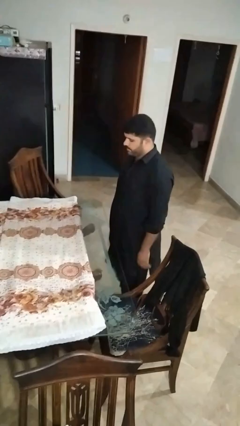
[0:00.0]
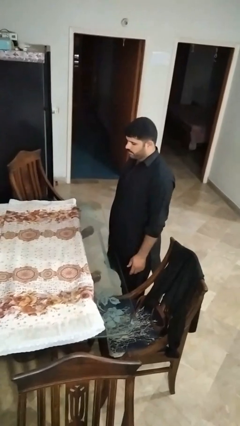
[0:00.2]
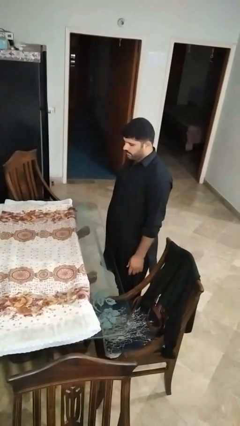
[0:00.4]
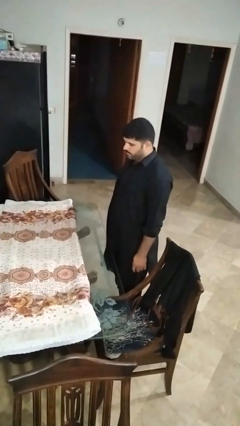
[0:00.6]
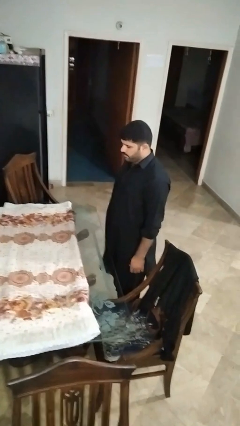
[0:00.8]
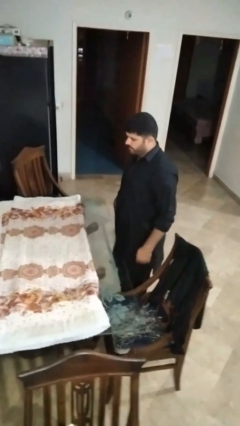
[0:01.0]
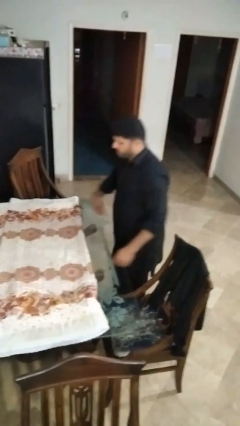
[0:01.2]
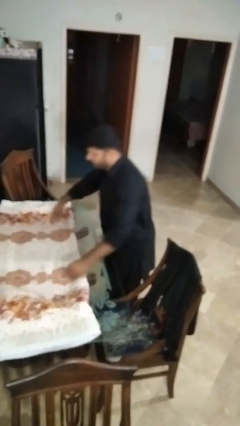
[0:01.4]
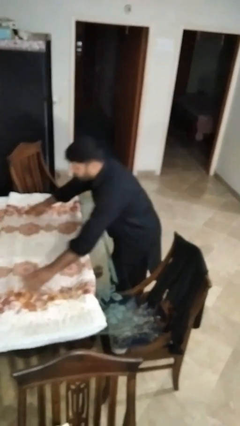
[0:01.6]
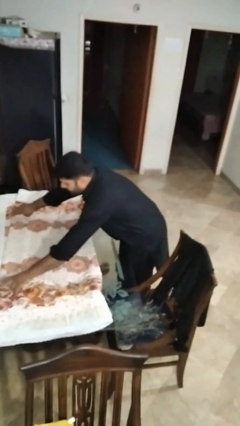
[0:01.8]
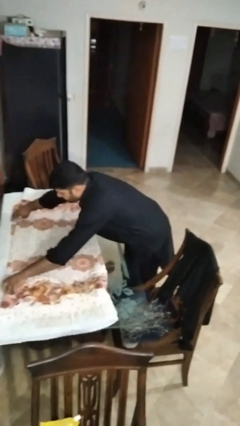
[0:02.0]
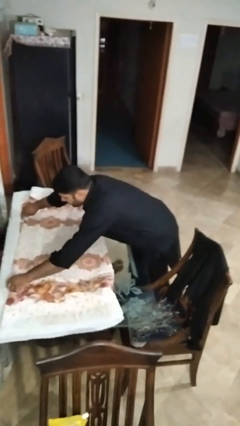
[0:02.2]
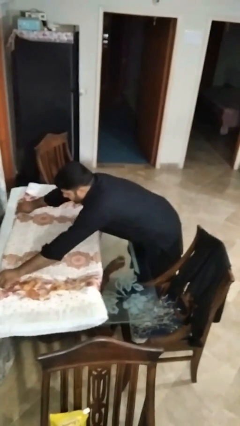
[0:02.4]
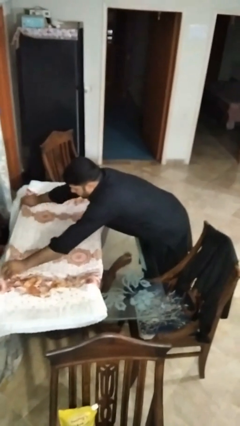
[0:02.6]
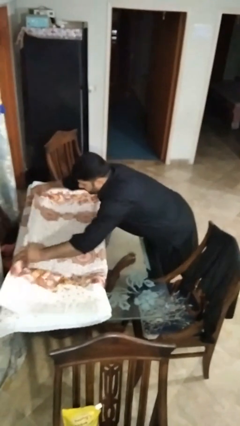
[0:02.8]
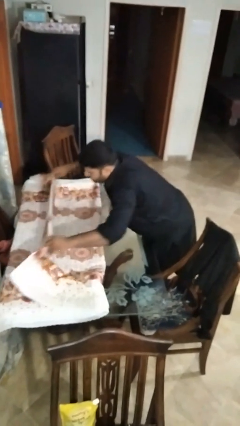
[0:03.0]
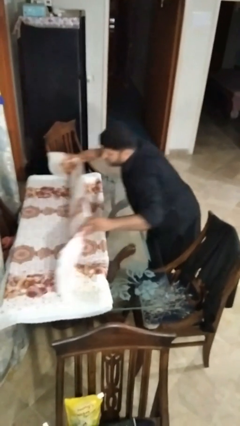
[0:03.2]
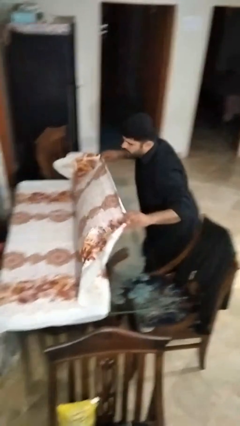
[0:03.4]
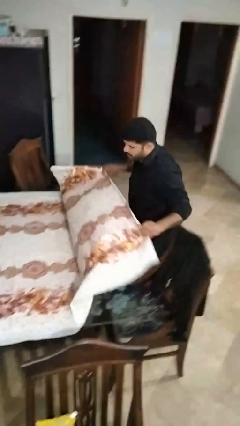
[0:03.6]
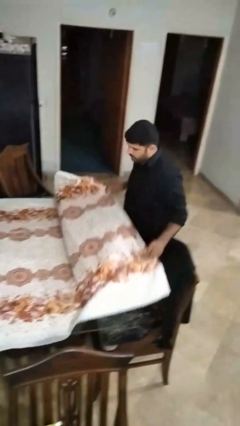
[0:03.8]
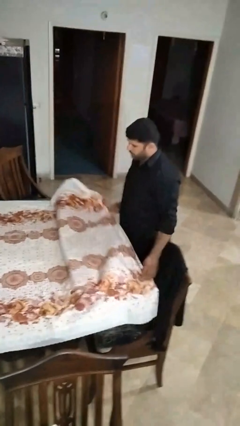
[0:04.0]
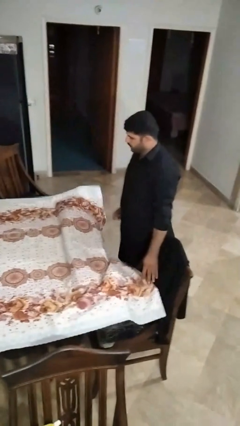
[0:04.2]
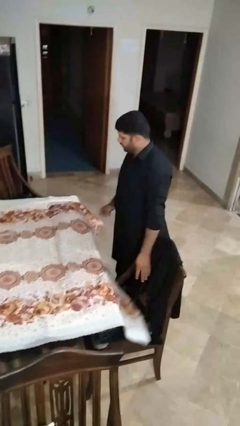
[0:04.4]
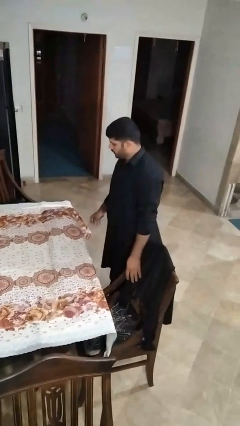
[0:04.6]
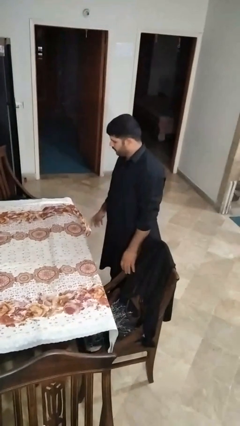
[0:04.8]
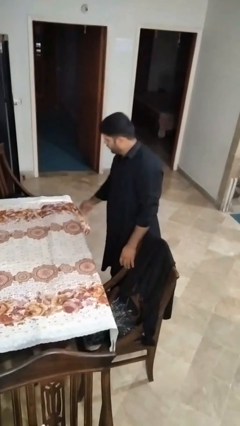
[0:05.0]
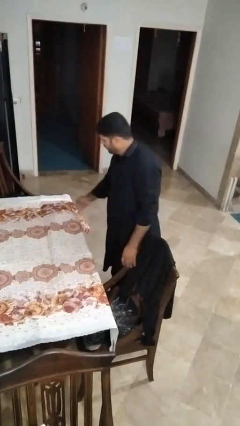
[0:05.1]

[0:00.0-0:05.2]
person spreads tablecloth

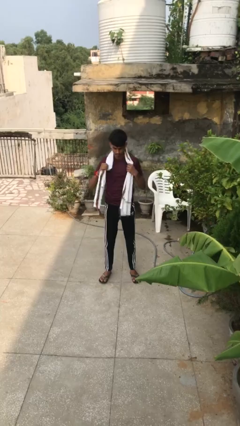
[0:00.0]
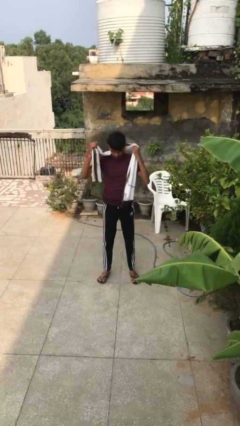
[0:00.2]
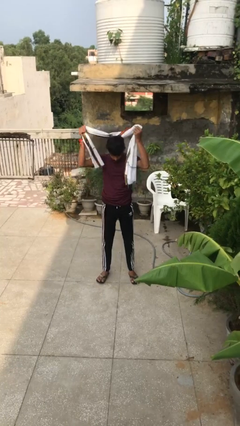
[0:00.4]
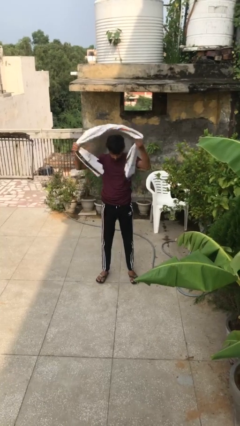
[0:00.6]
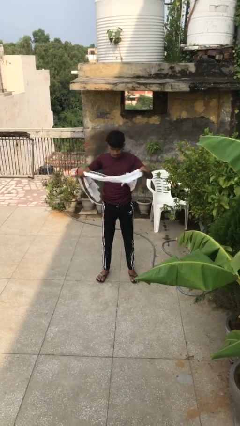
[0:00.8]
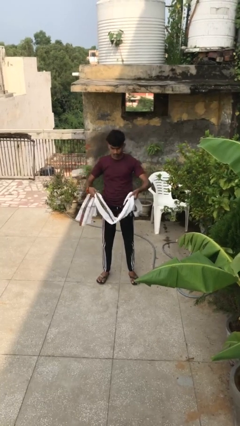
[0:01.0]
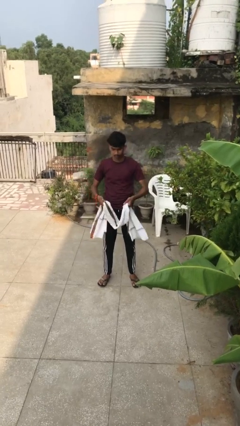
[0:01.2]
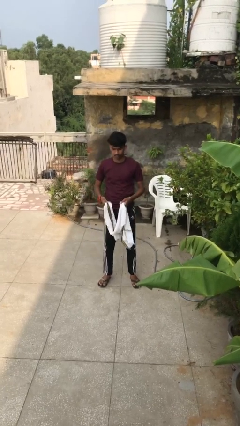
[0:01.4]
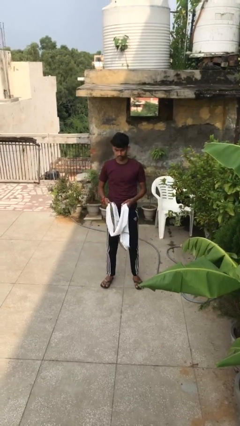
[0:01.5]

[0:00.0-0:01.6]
person takes off shoes

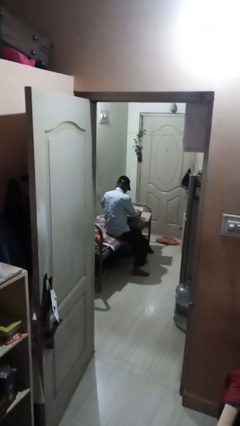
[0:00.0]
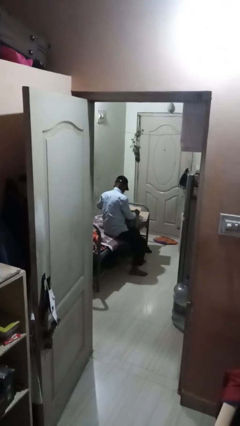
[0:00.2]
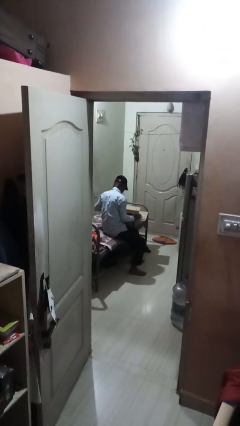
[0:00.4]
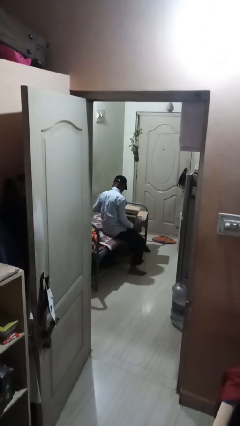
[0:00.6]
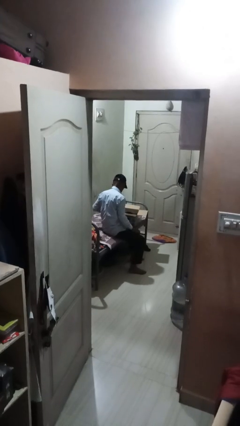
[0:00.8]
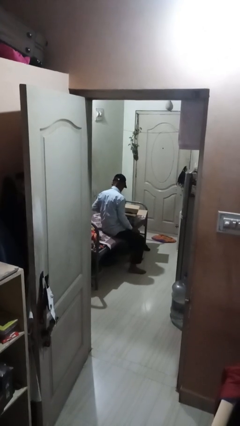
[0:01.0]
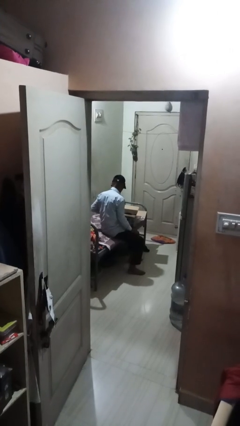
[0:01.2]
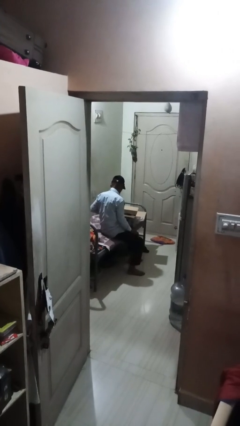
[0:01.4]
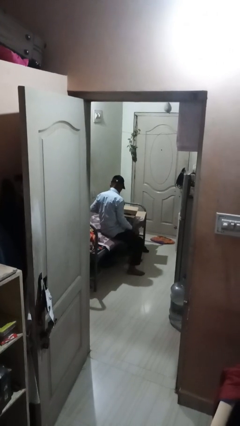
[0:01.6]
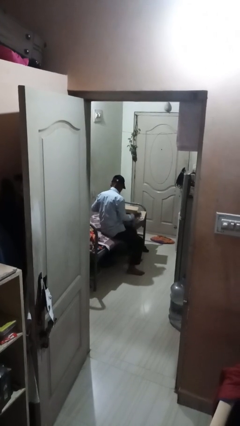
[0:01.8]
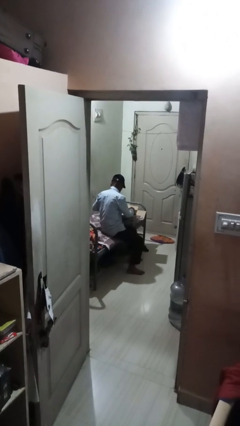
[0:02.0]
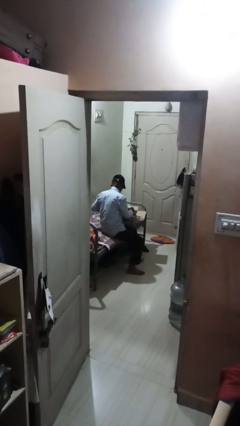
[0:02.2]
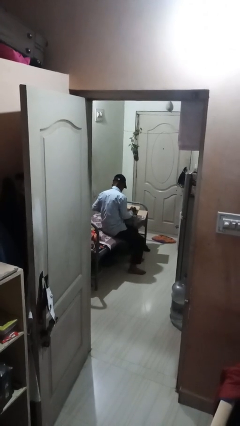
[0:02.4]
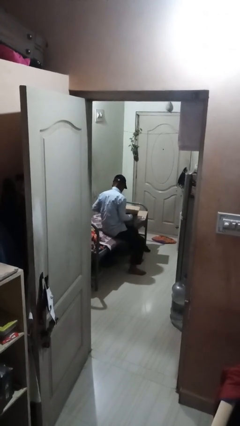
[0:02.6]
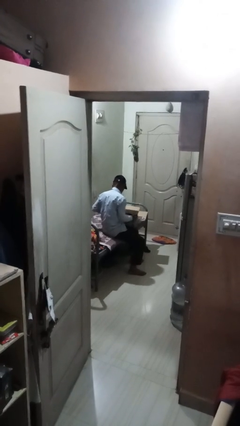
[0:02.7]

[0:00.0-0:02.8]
person searches in box

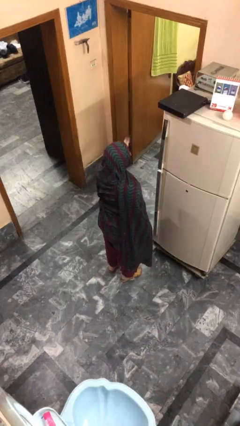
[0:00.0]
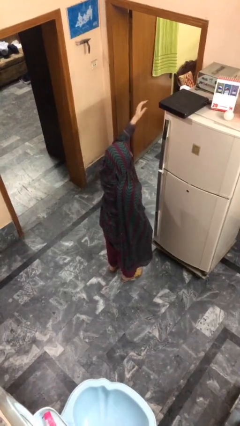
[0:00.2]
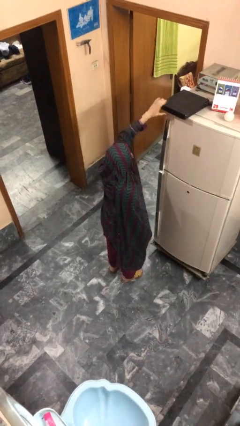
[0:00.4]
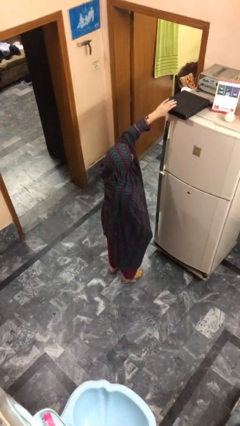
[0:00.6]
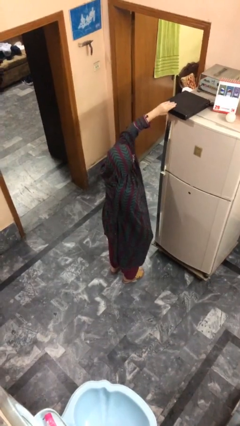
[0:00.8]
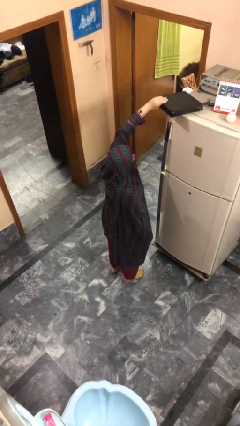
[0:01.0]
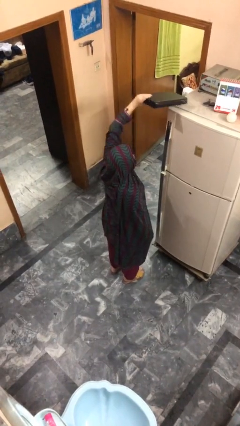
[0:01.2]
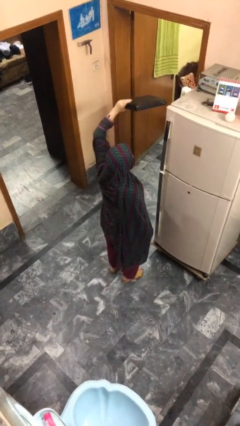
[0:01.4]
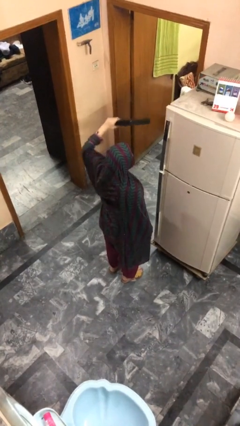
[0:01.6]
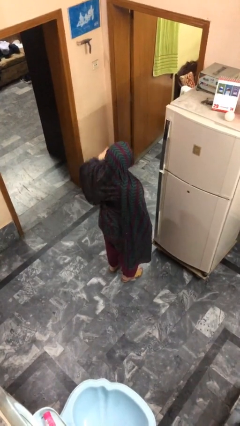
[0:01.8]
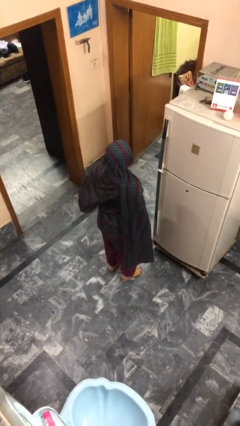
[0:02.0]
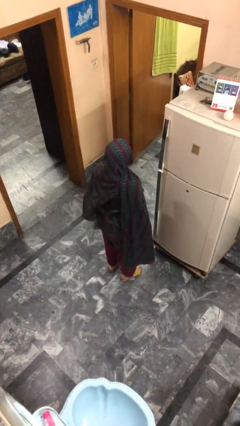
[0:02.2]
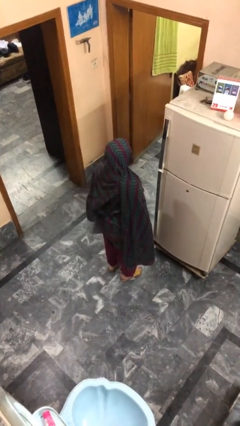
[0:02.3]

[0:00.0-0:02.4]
person picks up object from shelf

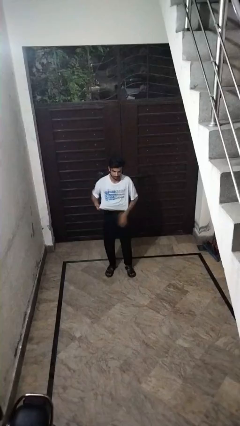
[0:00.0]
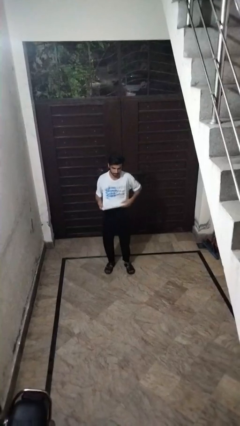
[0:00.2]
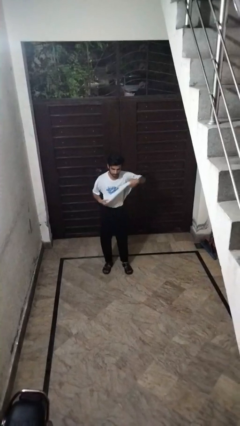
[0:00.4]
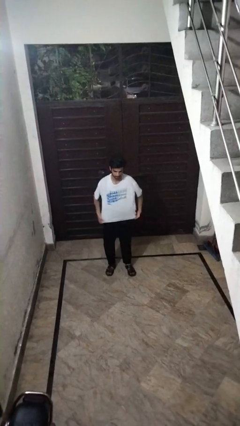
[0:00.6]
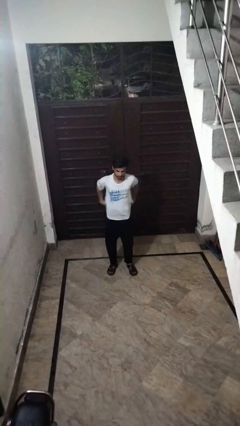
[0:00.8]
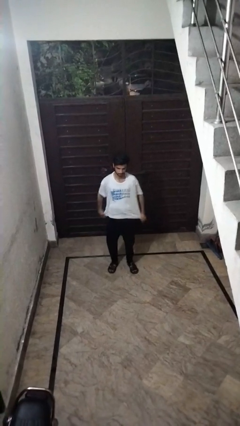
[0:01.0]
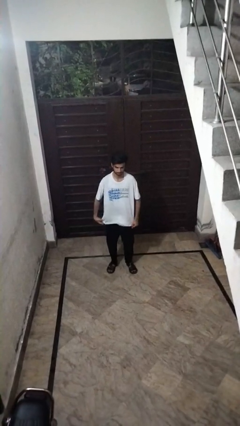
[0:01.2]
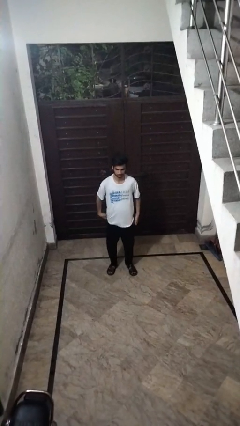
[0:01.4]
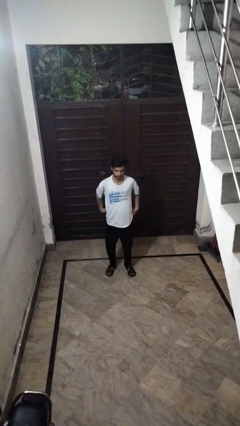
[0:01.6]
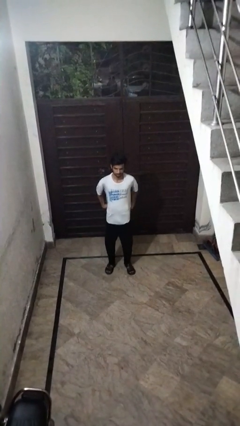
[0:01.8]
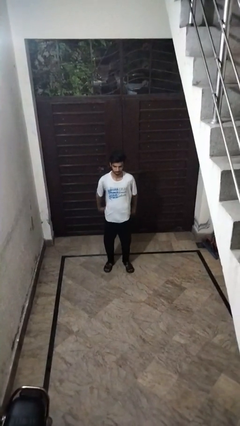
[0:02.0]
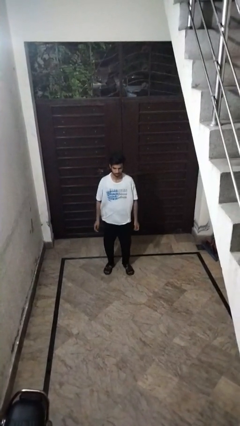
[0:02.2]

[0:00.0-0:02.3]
person opens facility door

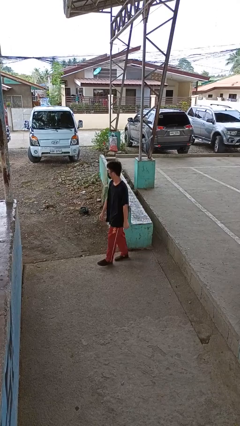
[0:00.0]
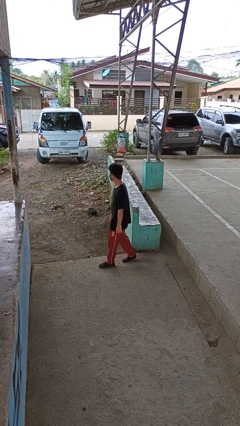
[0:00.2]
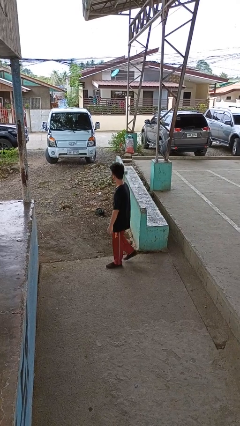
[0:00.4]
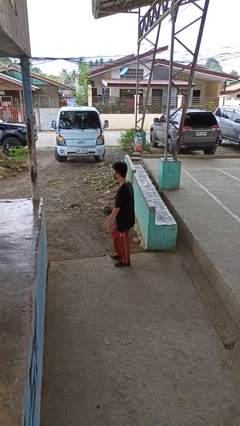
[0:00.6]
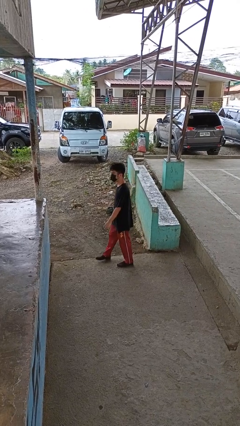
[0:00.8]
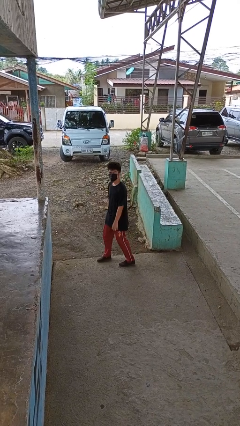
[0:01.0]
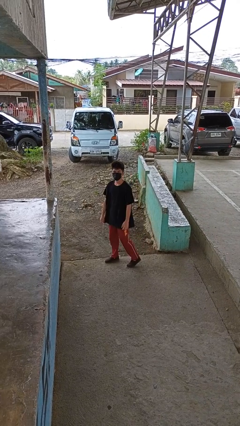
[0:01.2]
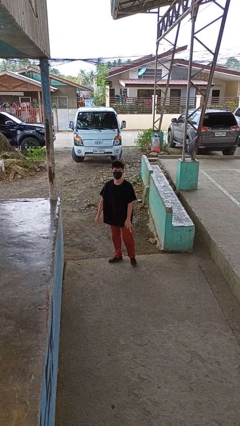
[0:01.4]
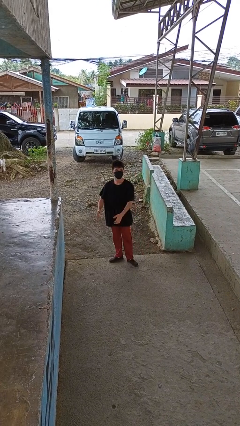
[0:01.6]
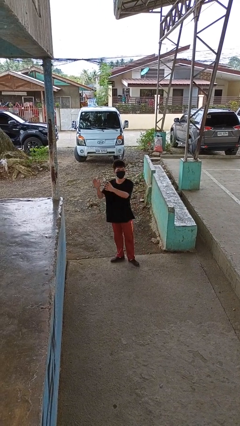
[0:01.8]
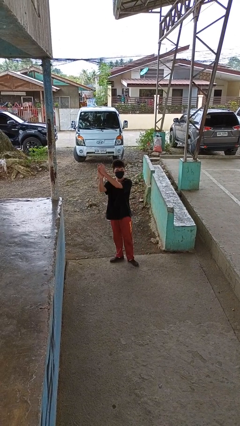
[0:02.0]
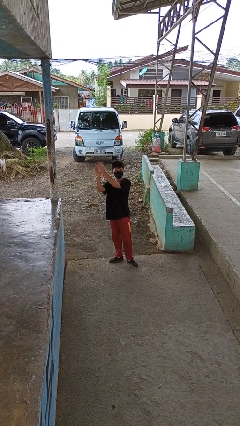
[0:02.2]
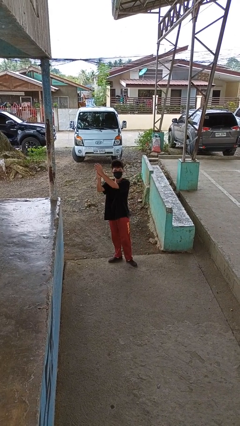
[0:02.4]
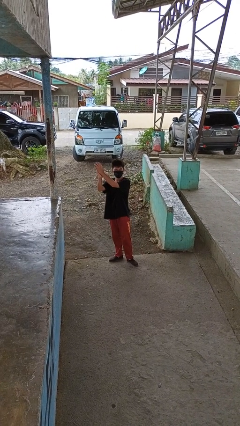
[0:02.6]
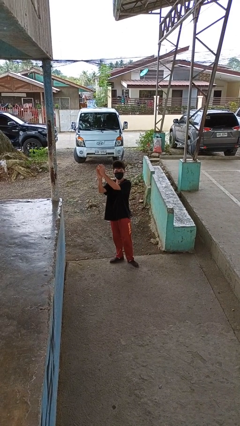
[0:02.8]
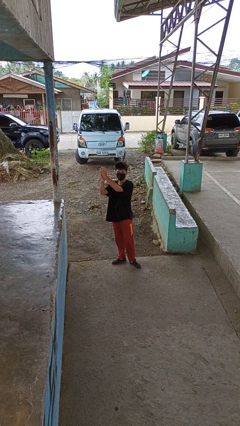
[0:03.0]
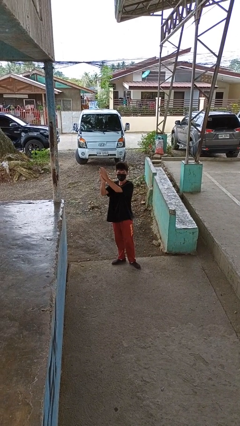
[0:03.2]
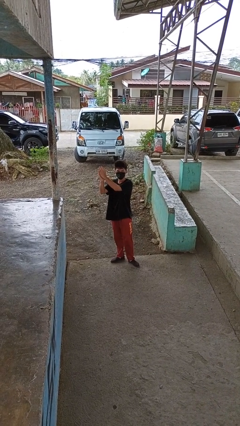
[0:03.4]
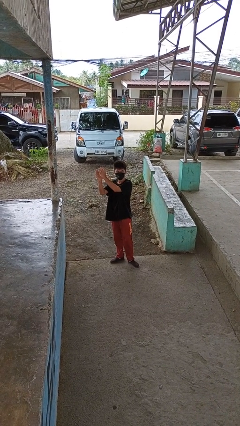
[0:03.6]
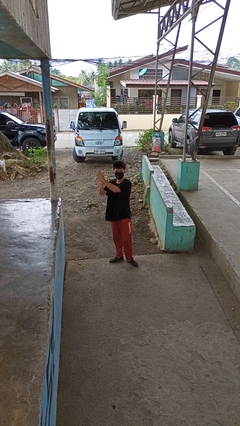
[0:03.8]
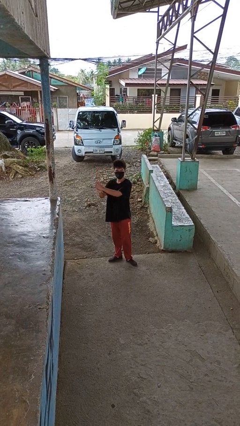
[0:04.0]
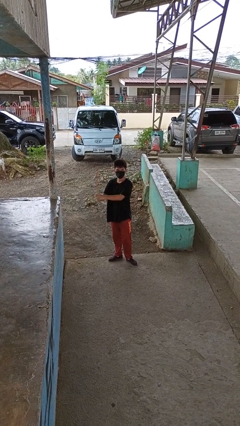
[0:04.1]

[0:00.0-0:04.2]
person claps hands
